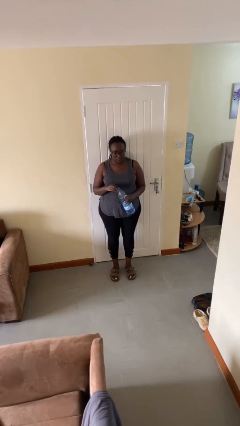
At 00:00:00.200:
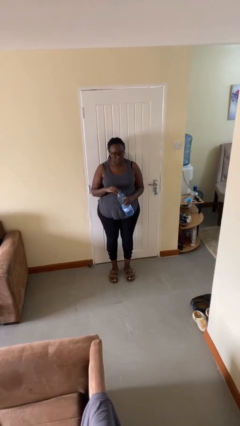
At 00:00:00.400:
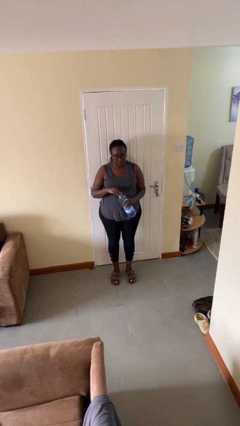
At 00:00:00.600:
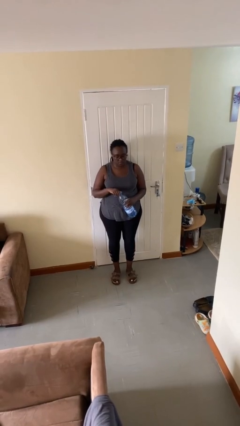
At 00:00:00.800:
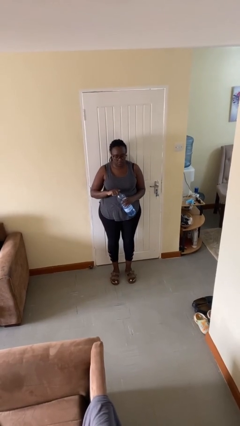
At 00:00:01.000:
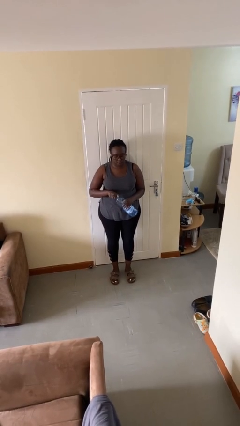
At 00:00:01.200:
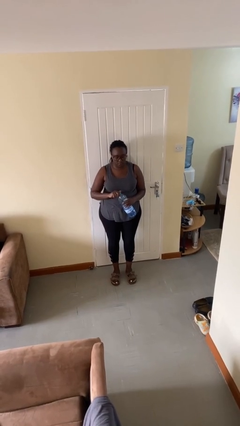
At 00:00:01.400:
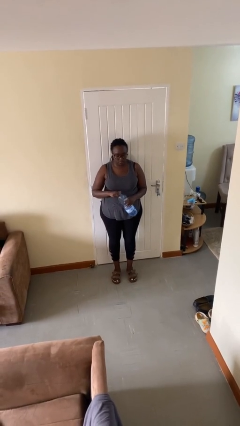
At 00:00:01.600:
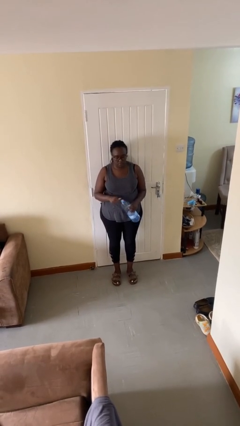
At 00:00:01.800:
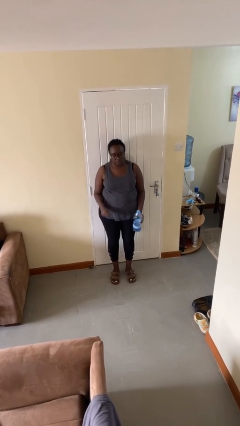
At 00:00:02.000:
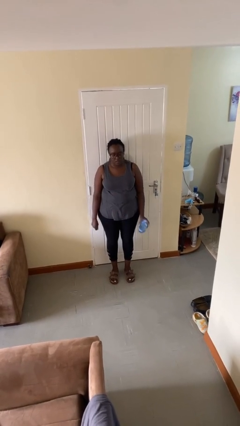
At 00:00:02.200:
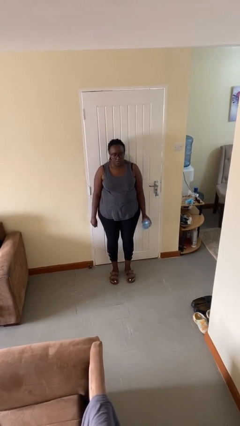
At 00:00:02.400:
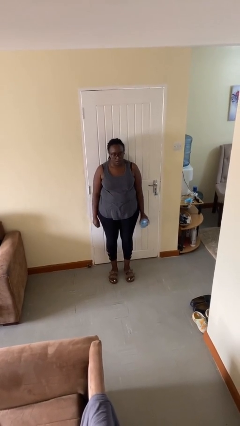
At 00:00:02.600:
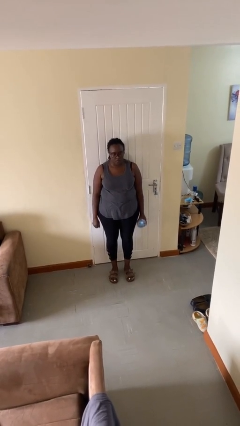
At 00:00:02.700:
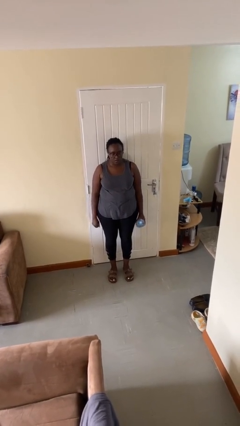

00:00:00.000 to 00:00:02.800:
person screws lid to bottle

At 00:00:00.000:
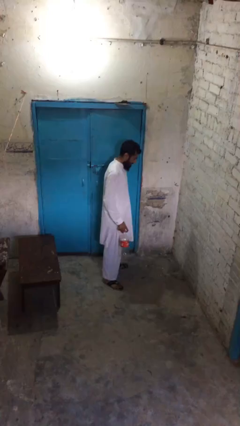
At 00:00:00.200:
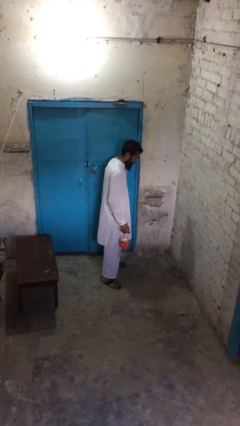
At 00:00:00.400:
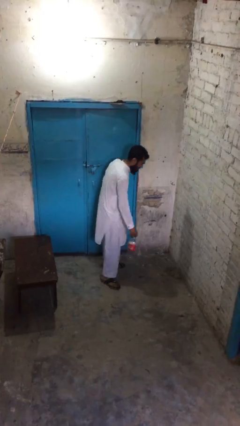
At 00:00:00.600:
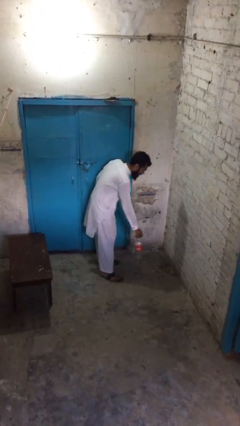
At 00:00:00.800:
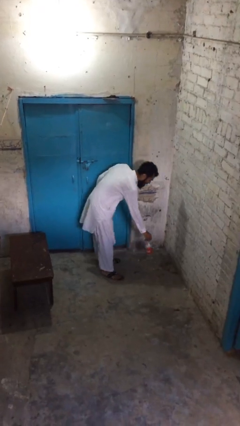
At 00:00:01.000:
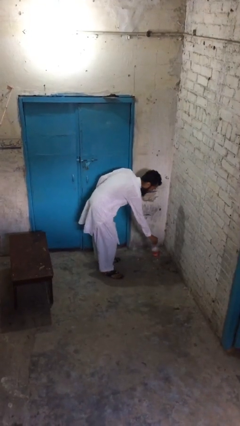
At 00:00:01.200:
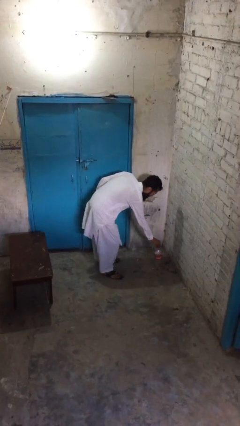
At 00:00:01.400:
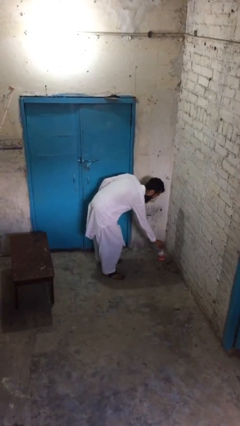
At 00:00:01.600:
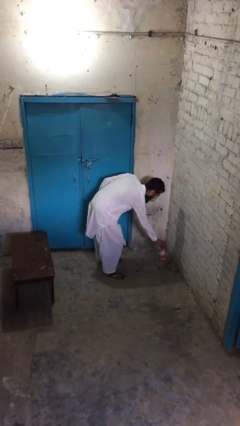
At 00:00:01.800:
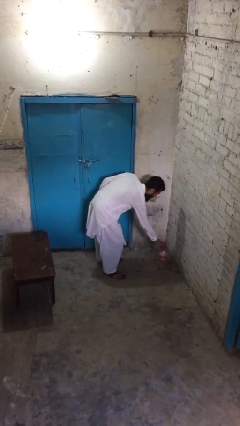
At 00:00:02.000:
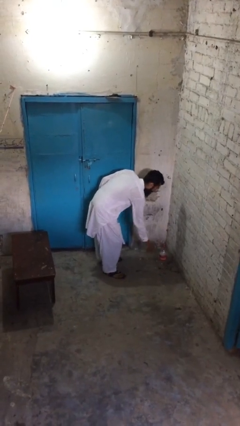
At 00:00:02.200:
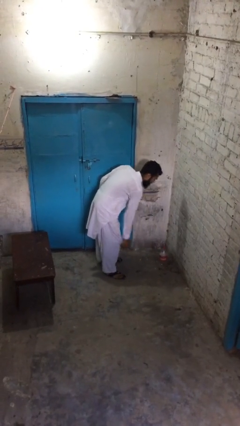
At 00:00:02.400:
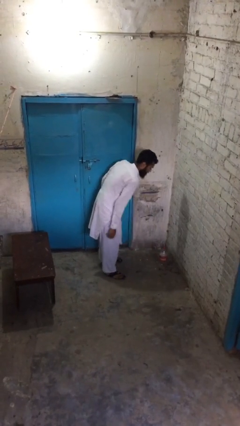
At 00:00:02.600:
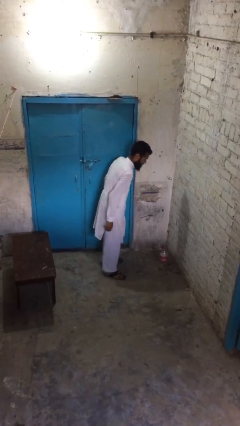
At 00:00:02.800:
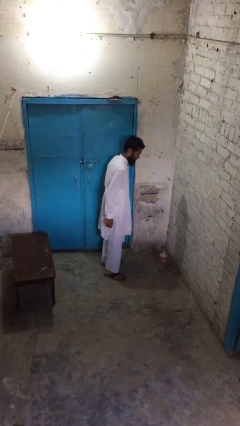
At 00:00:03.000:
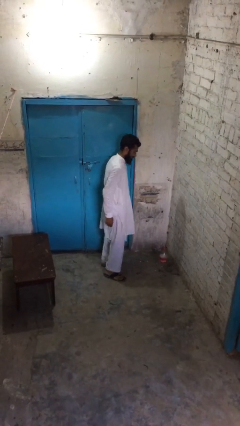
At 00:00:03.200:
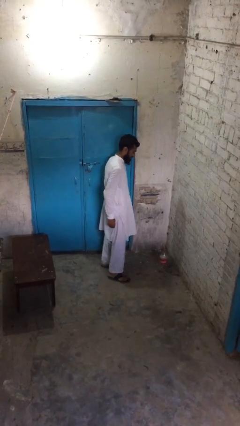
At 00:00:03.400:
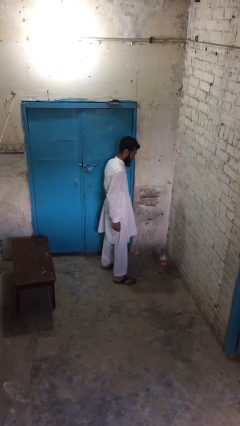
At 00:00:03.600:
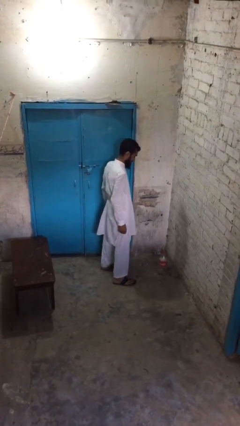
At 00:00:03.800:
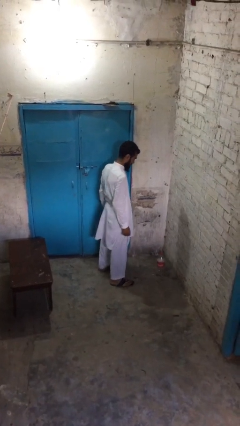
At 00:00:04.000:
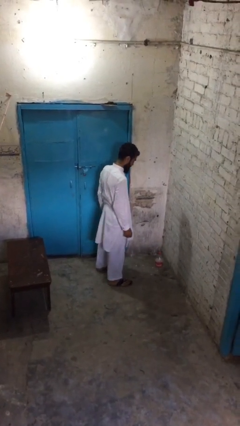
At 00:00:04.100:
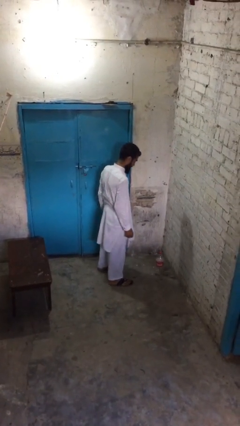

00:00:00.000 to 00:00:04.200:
person puts down object on floor

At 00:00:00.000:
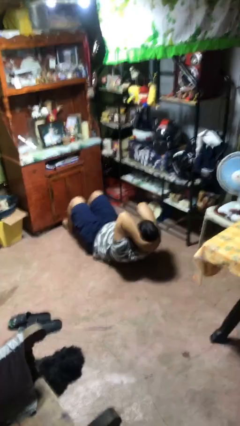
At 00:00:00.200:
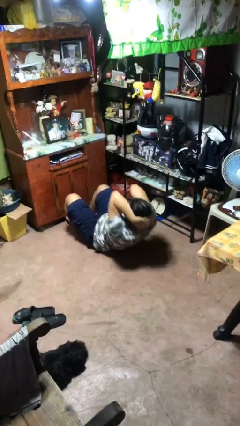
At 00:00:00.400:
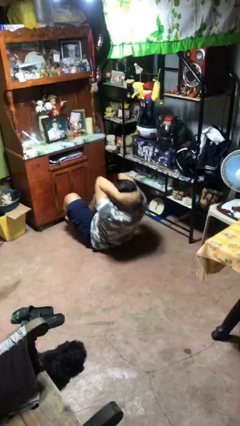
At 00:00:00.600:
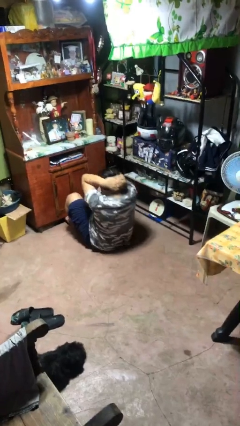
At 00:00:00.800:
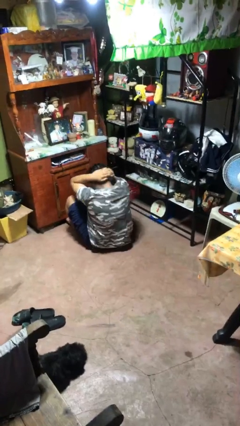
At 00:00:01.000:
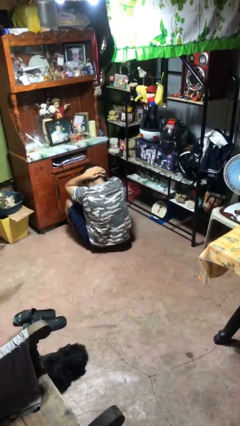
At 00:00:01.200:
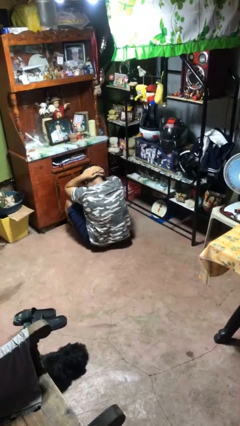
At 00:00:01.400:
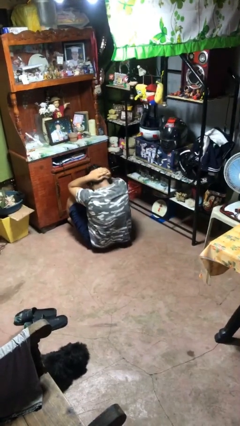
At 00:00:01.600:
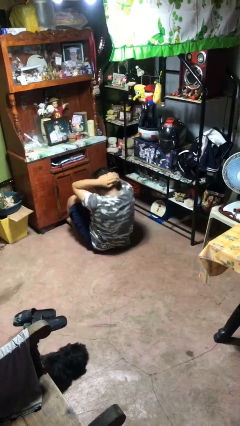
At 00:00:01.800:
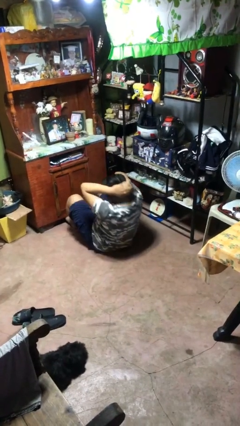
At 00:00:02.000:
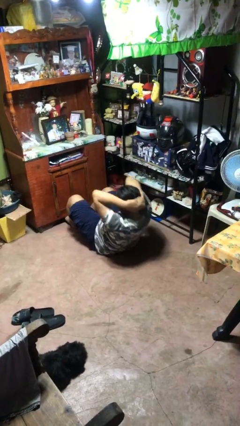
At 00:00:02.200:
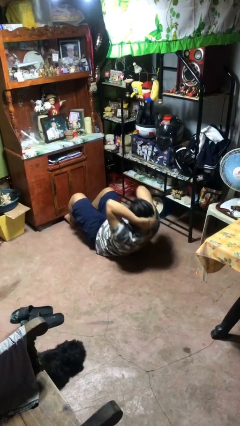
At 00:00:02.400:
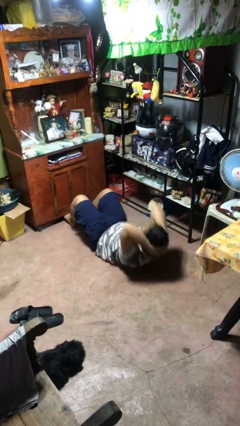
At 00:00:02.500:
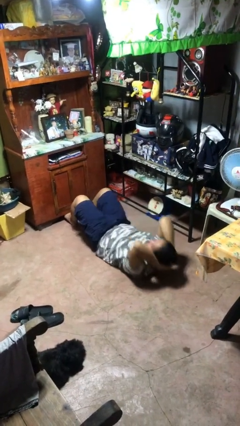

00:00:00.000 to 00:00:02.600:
person exercises with situp

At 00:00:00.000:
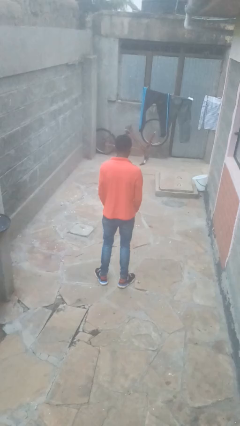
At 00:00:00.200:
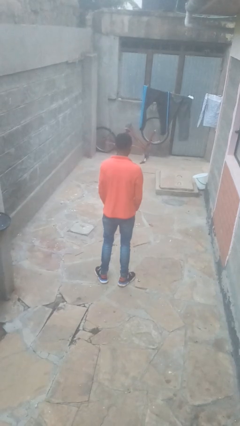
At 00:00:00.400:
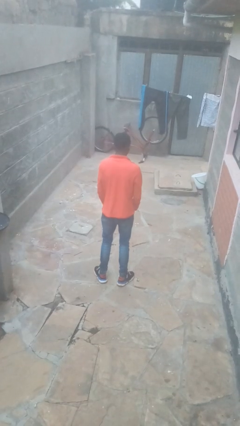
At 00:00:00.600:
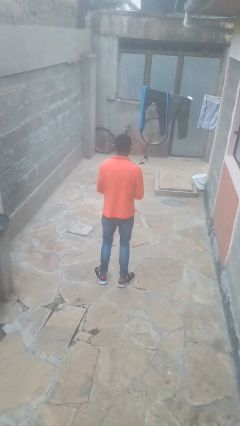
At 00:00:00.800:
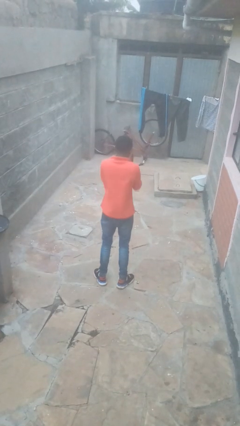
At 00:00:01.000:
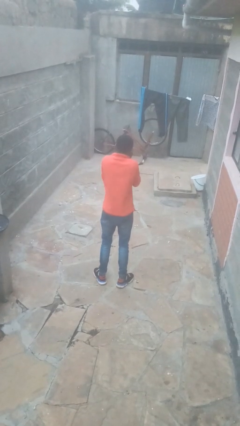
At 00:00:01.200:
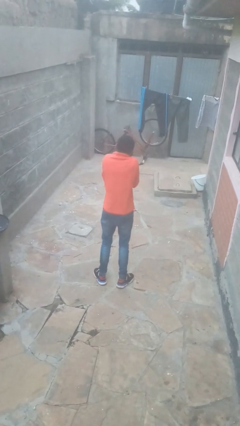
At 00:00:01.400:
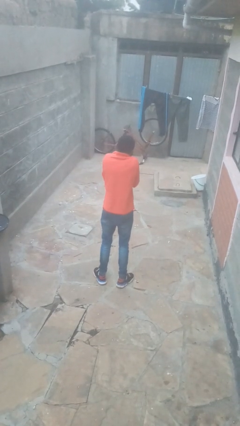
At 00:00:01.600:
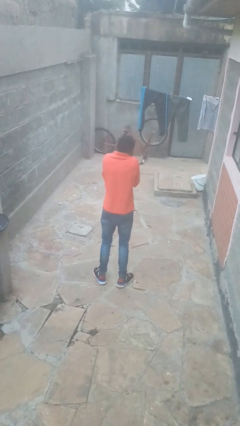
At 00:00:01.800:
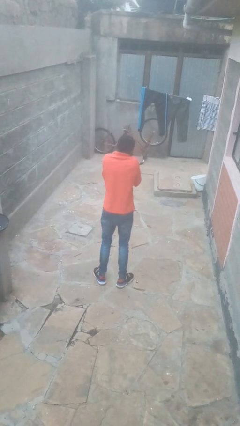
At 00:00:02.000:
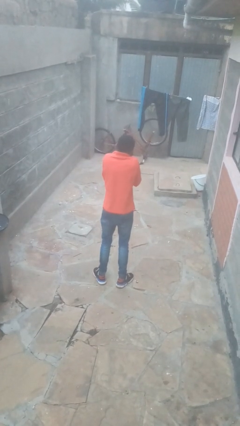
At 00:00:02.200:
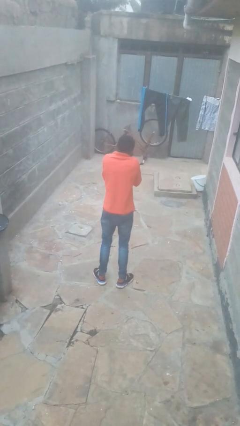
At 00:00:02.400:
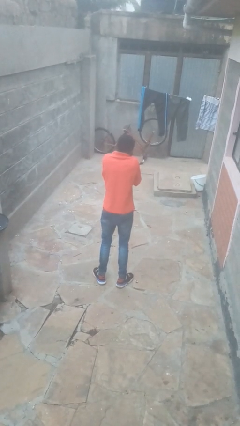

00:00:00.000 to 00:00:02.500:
person covers face with hands

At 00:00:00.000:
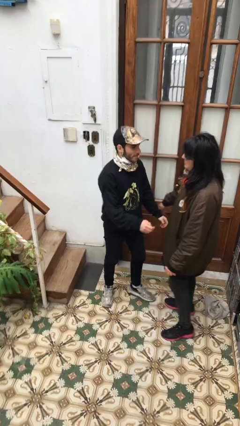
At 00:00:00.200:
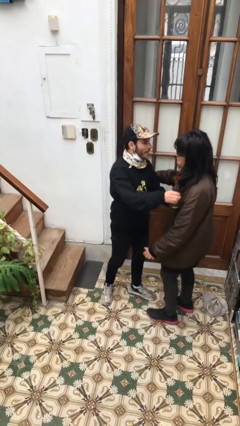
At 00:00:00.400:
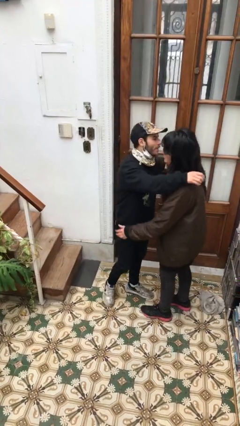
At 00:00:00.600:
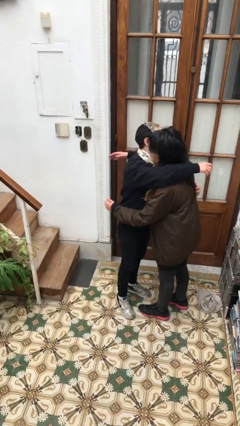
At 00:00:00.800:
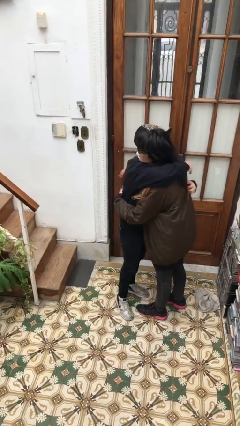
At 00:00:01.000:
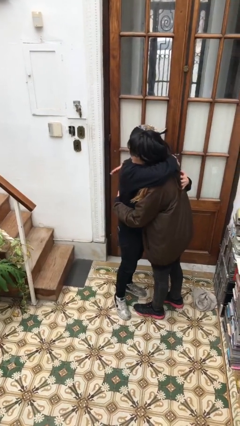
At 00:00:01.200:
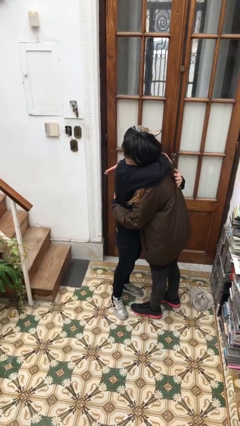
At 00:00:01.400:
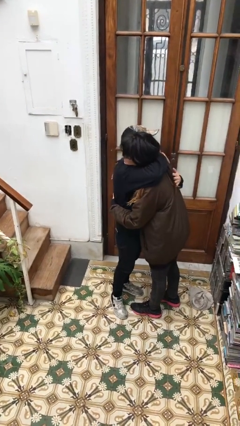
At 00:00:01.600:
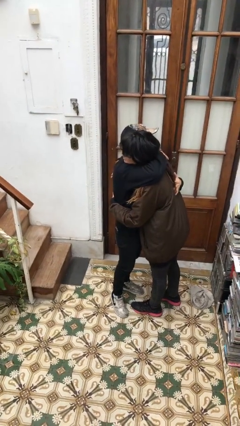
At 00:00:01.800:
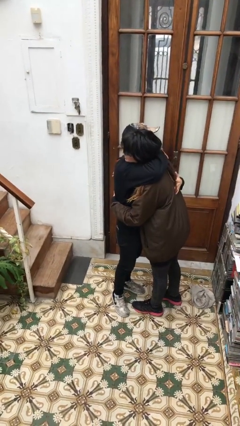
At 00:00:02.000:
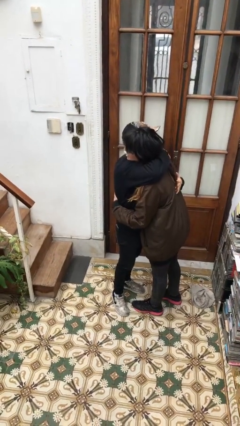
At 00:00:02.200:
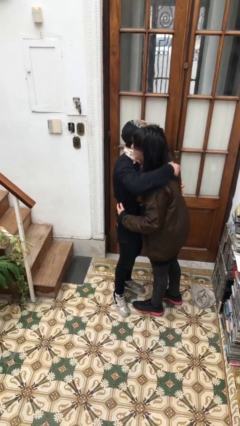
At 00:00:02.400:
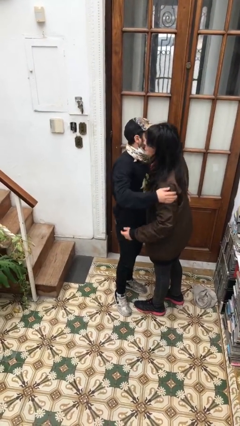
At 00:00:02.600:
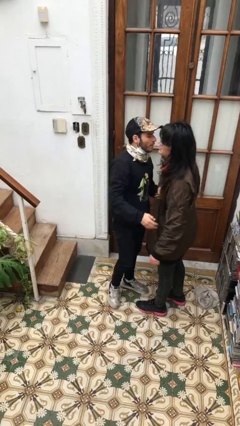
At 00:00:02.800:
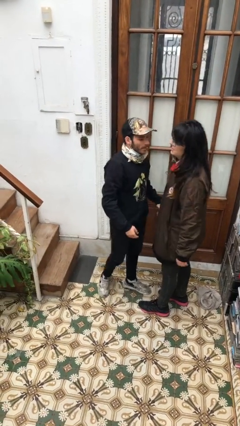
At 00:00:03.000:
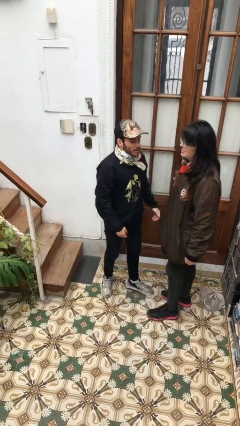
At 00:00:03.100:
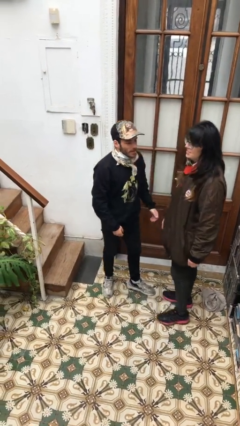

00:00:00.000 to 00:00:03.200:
person embraces person

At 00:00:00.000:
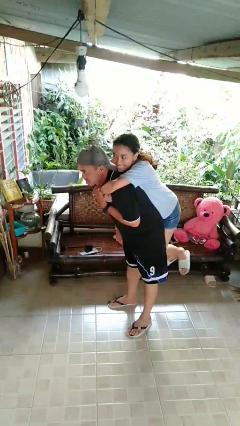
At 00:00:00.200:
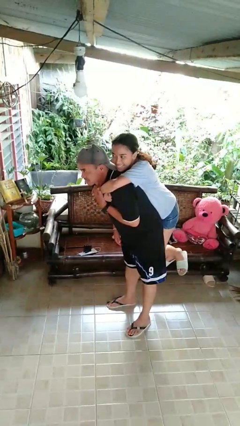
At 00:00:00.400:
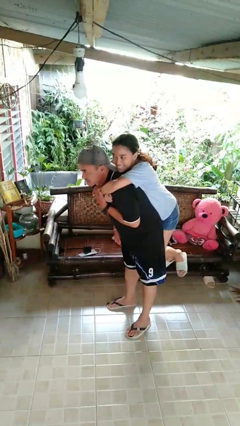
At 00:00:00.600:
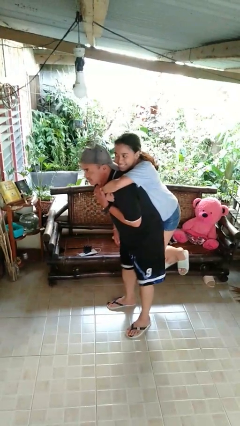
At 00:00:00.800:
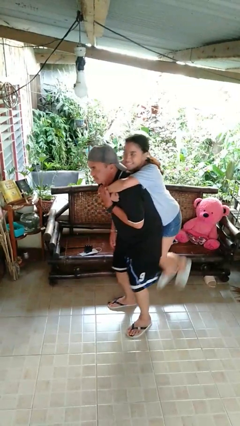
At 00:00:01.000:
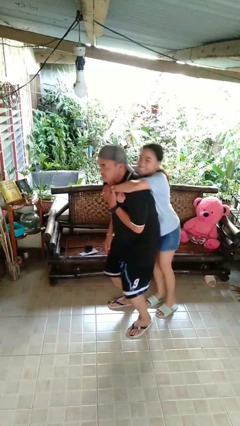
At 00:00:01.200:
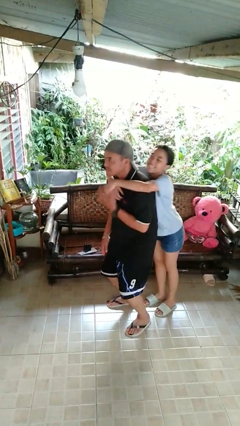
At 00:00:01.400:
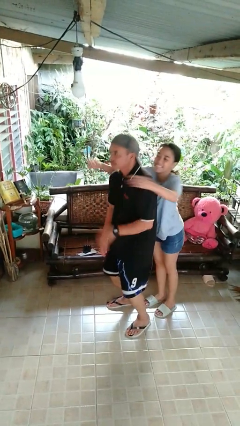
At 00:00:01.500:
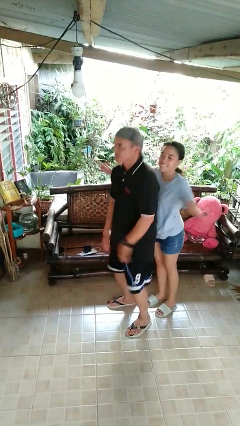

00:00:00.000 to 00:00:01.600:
person puts down person
